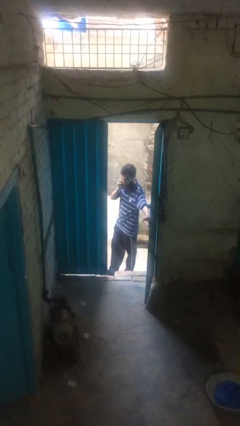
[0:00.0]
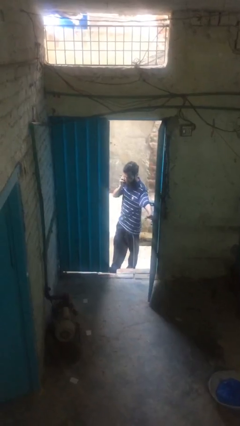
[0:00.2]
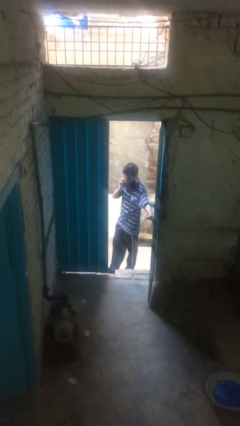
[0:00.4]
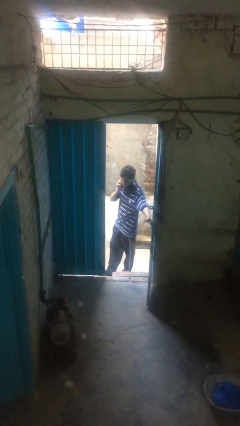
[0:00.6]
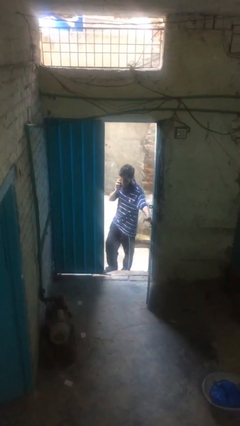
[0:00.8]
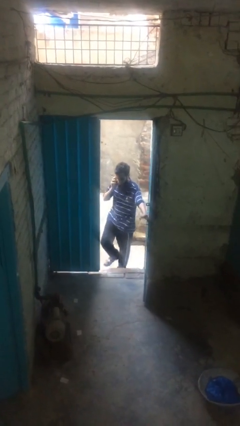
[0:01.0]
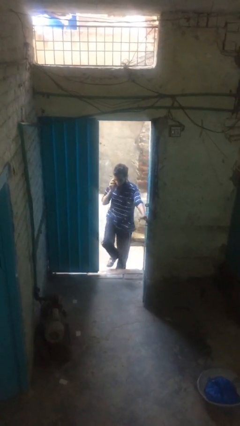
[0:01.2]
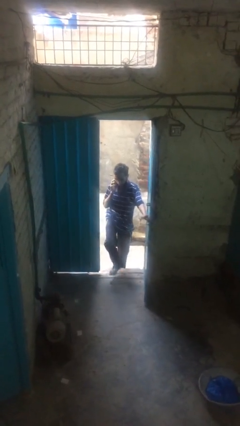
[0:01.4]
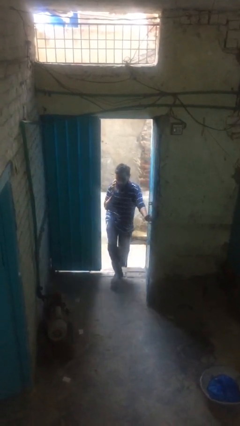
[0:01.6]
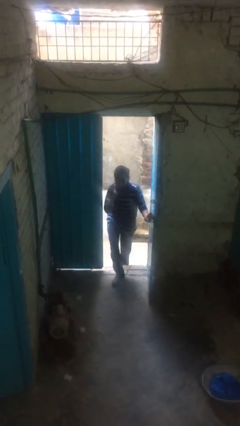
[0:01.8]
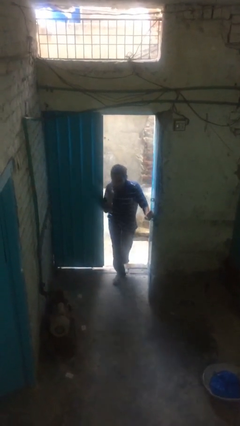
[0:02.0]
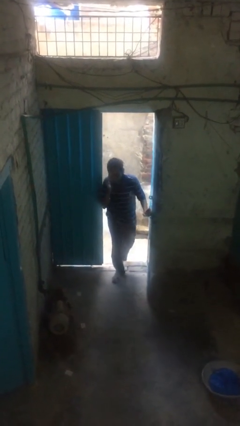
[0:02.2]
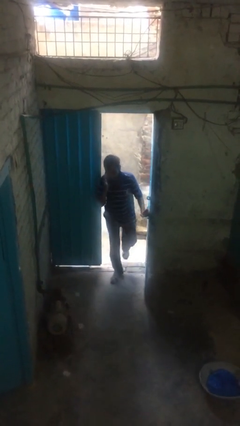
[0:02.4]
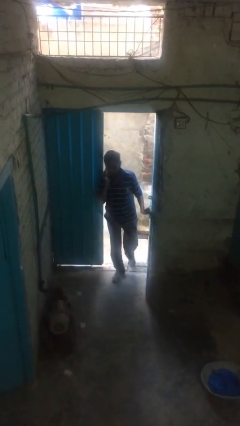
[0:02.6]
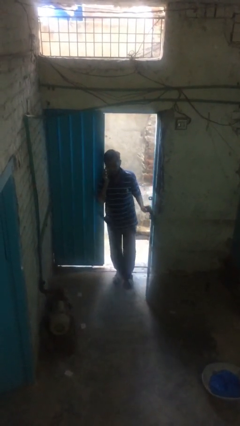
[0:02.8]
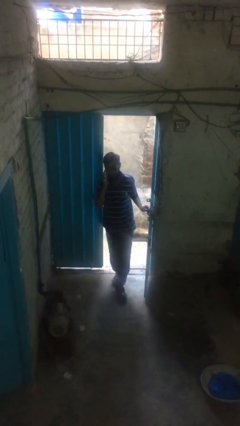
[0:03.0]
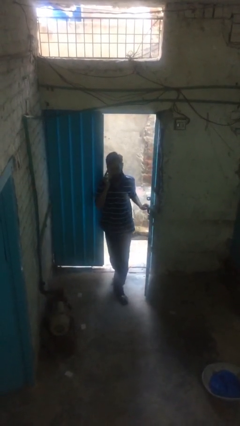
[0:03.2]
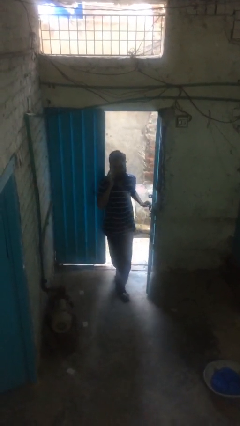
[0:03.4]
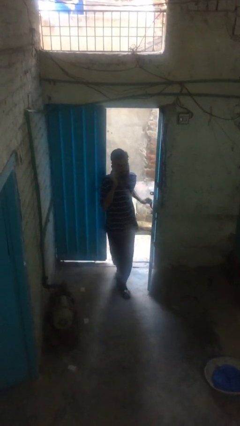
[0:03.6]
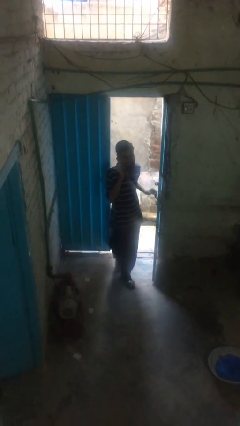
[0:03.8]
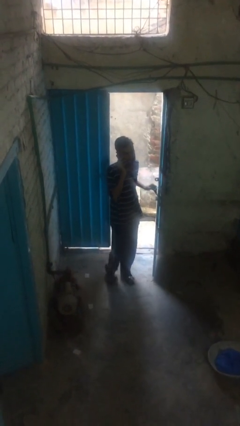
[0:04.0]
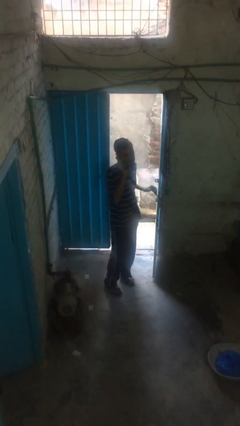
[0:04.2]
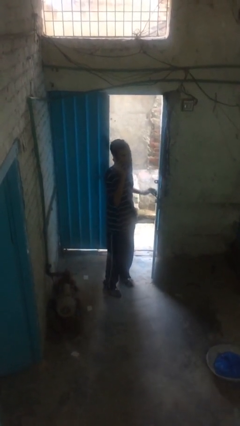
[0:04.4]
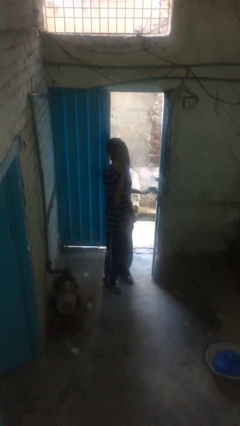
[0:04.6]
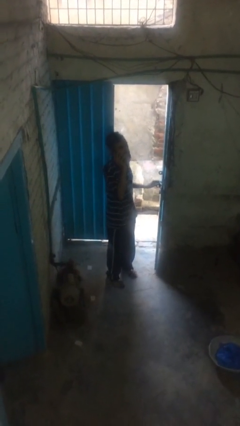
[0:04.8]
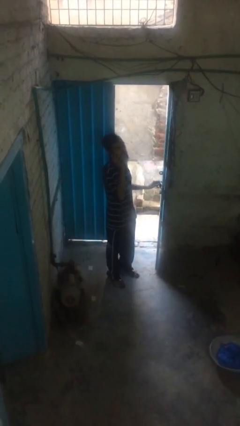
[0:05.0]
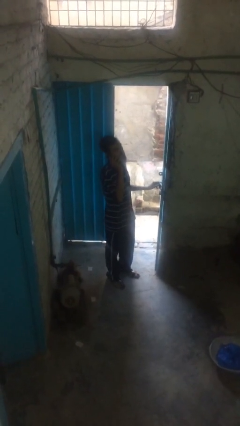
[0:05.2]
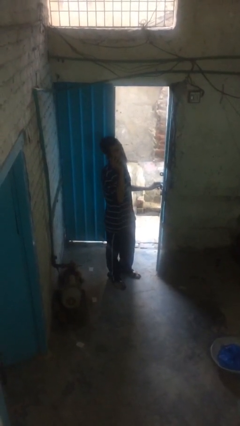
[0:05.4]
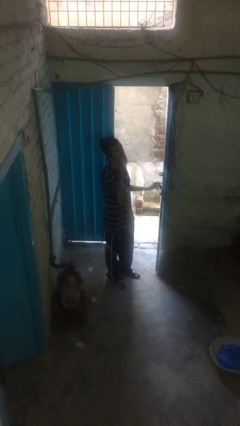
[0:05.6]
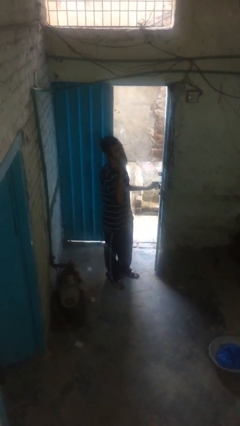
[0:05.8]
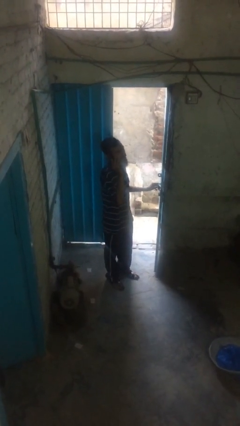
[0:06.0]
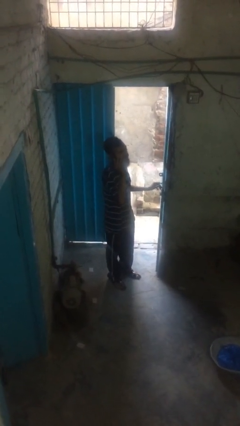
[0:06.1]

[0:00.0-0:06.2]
person enters scene through structure

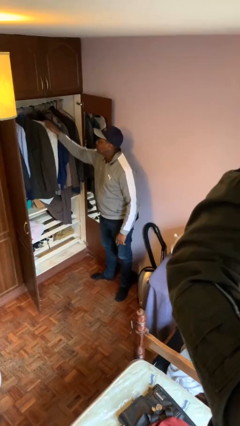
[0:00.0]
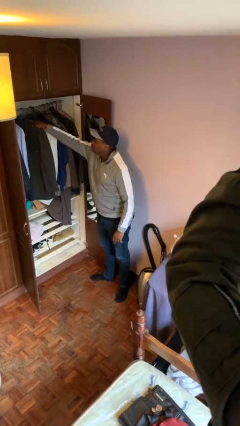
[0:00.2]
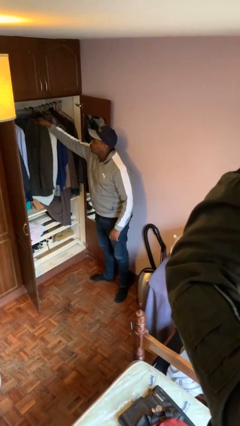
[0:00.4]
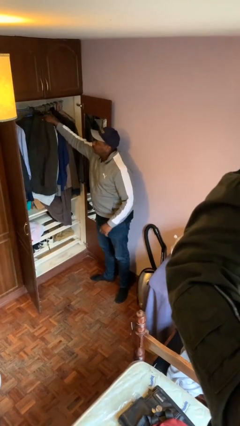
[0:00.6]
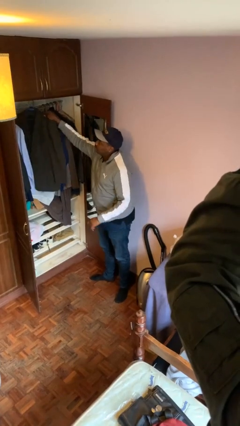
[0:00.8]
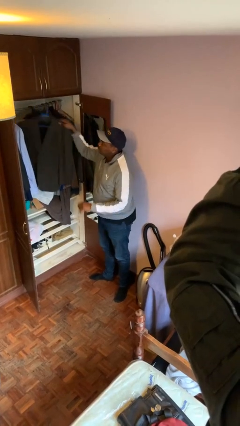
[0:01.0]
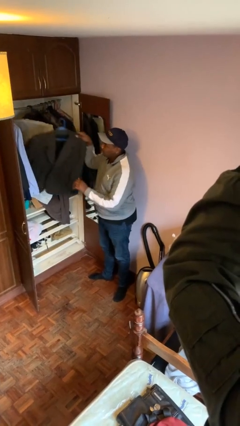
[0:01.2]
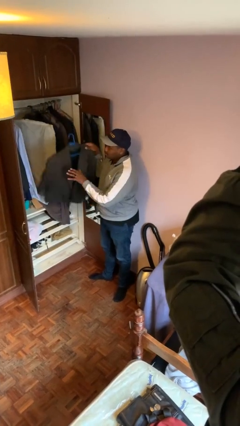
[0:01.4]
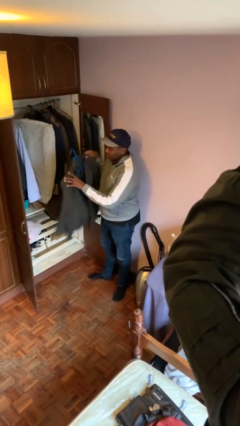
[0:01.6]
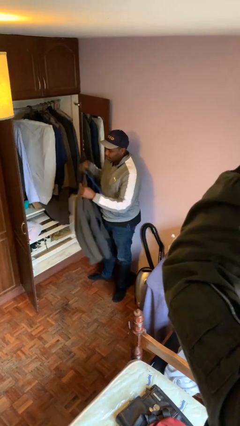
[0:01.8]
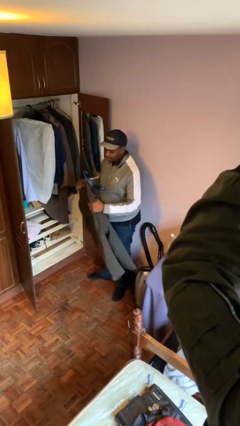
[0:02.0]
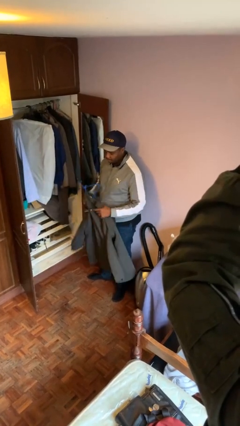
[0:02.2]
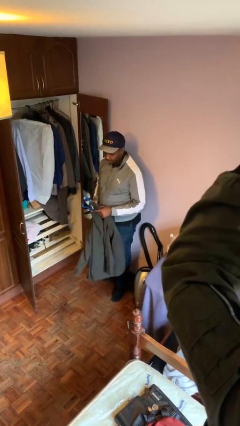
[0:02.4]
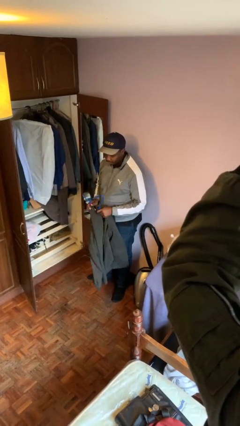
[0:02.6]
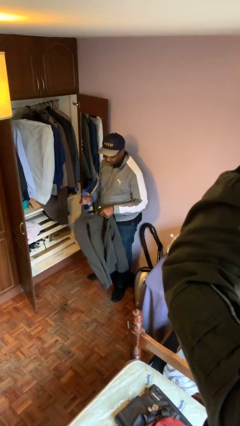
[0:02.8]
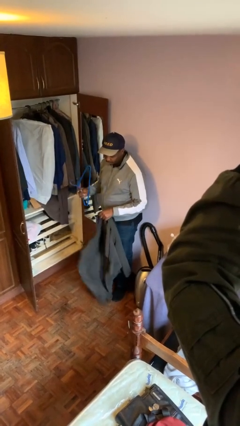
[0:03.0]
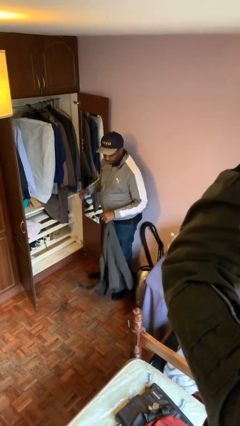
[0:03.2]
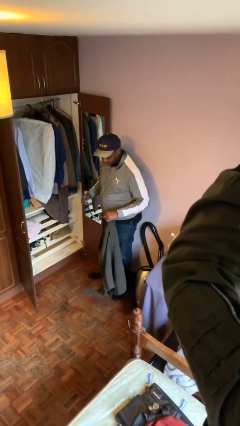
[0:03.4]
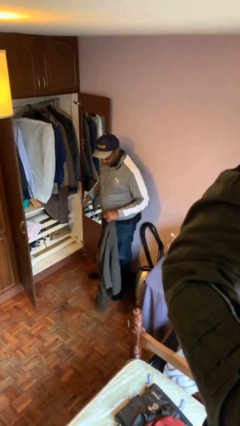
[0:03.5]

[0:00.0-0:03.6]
person takes clothes from closet

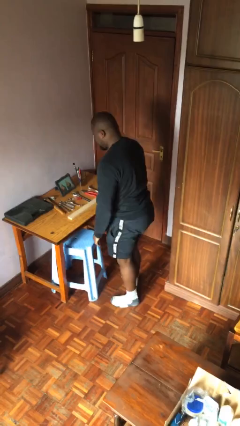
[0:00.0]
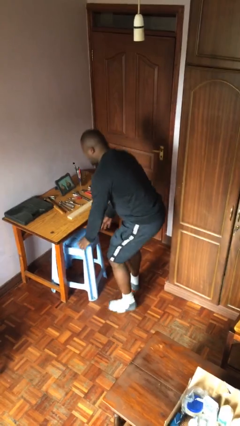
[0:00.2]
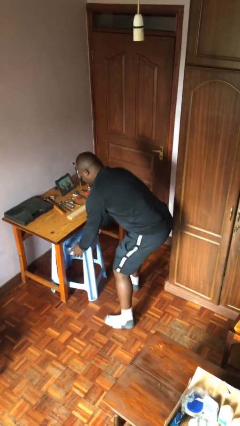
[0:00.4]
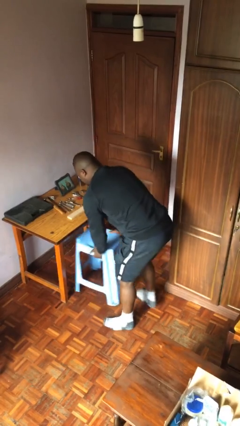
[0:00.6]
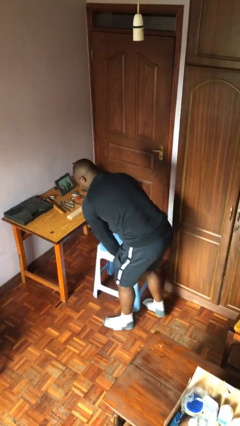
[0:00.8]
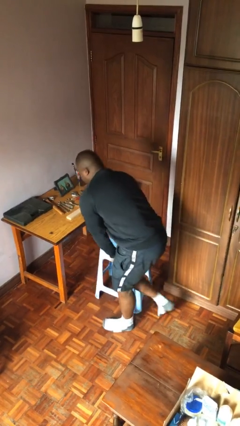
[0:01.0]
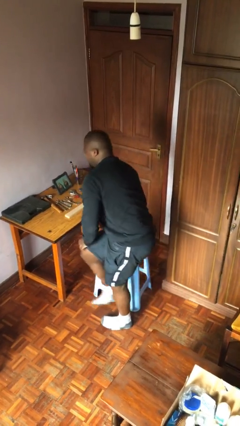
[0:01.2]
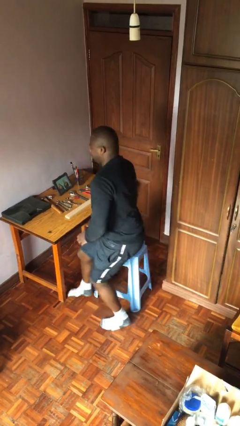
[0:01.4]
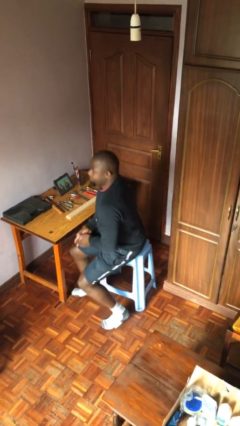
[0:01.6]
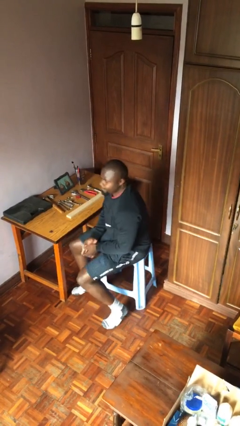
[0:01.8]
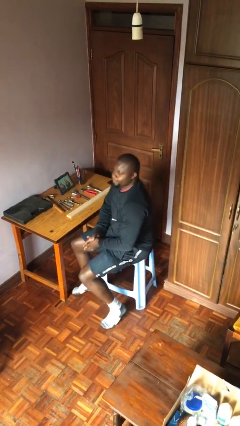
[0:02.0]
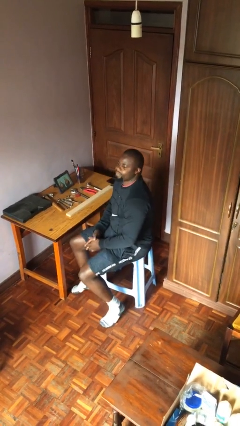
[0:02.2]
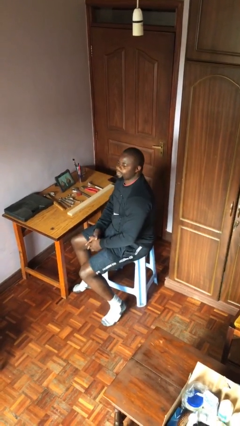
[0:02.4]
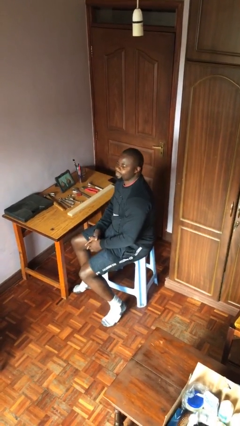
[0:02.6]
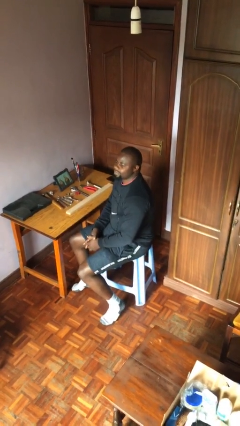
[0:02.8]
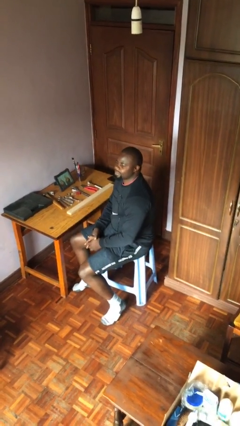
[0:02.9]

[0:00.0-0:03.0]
person sits down

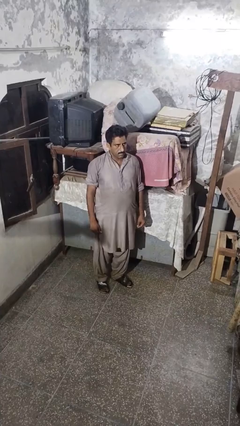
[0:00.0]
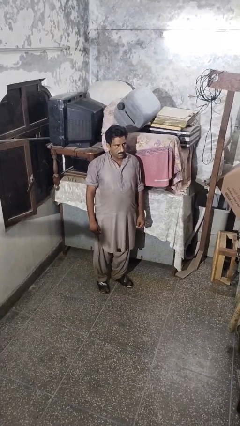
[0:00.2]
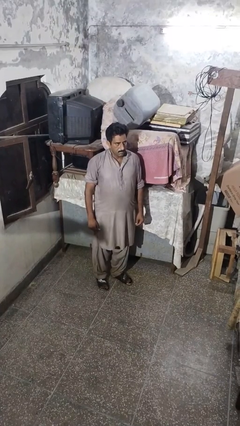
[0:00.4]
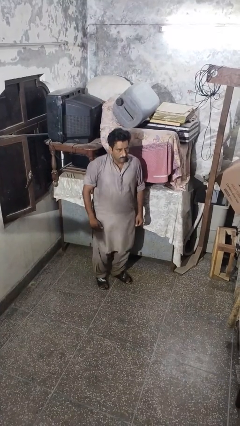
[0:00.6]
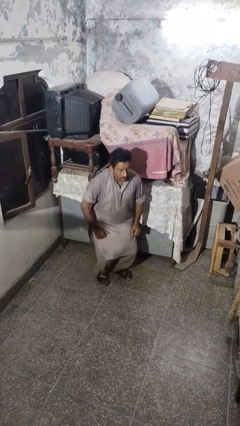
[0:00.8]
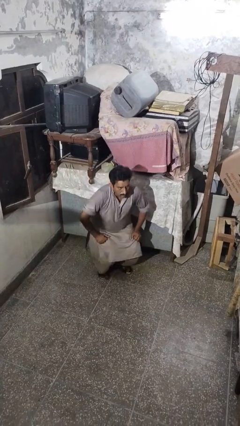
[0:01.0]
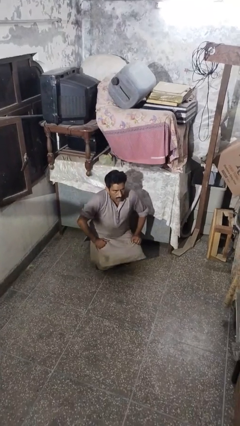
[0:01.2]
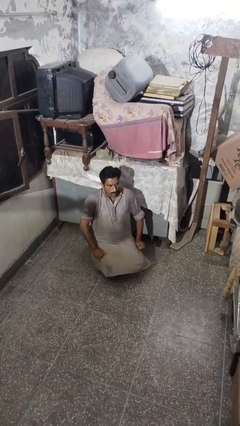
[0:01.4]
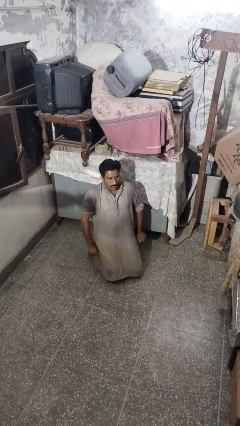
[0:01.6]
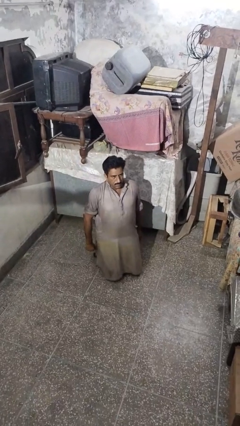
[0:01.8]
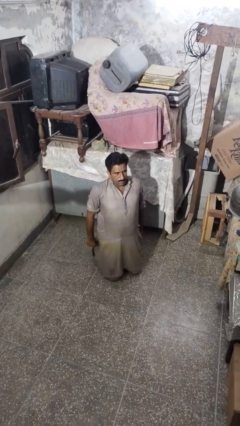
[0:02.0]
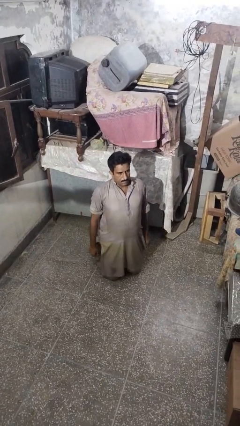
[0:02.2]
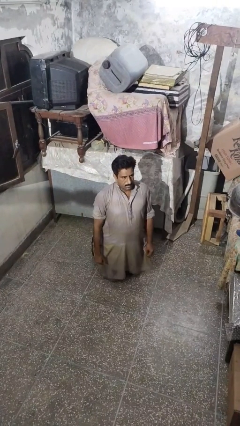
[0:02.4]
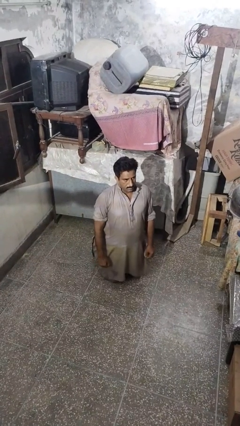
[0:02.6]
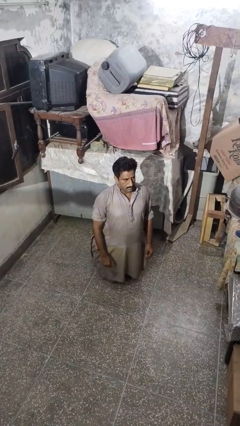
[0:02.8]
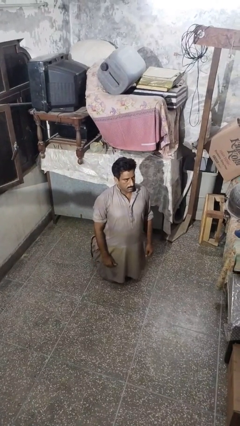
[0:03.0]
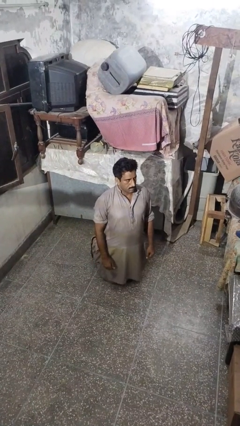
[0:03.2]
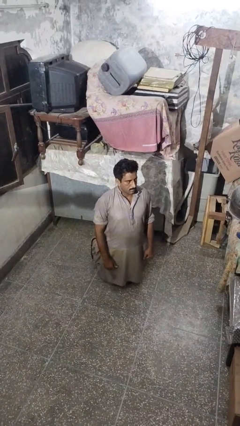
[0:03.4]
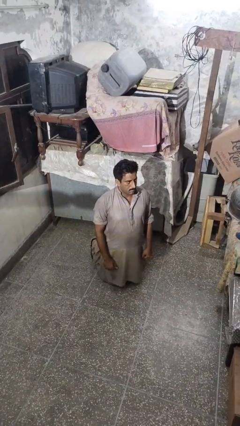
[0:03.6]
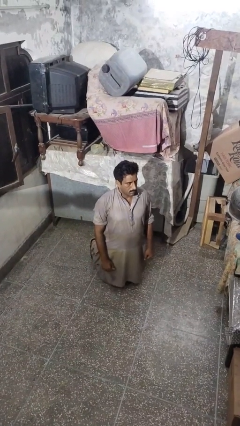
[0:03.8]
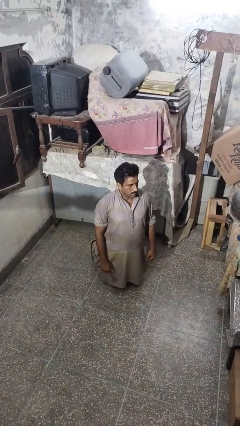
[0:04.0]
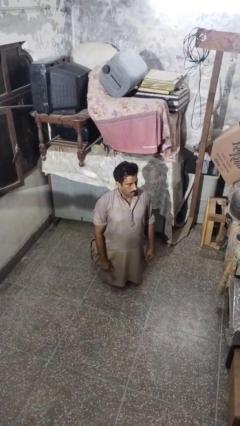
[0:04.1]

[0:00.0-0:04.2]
person kneels

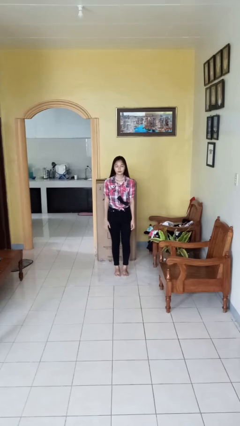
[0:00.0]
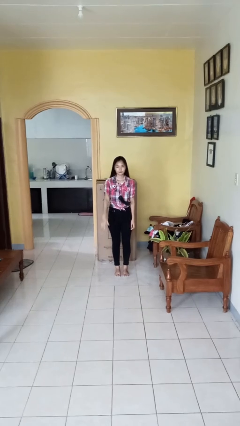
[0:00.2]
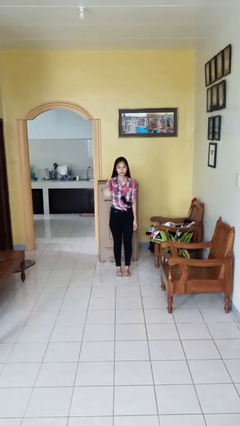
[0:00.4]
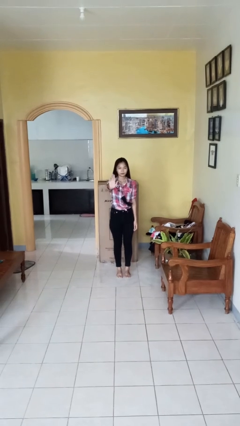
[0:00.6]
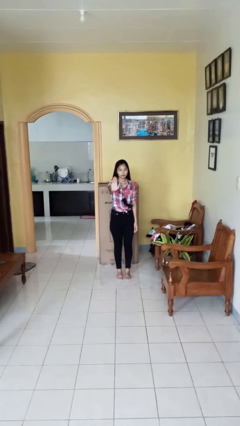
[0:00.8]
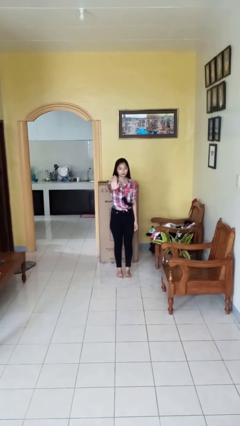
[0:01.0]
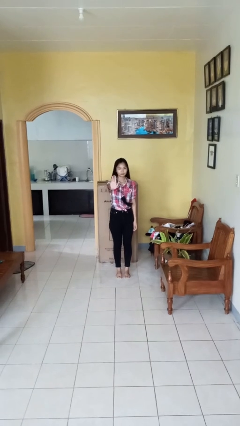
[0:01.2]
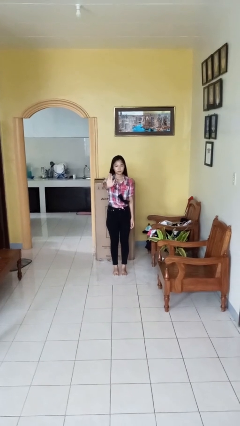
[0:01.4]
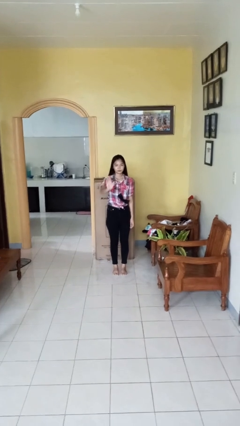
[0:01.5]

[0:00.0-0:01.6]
person gestures stop
